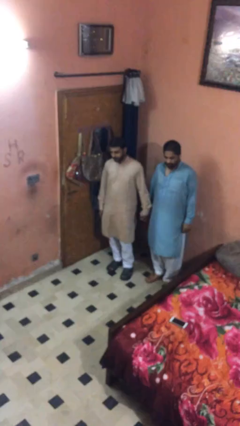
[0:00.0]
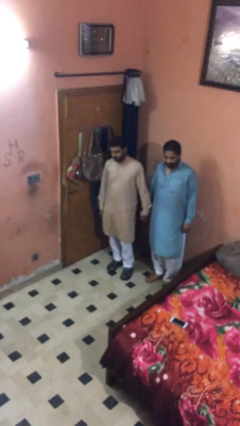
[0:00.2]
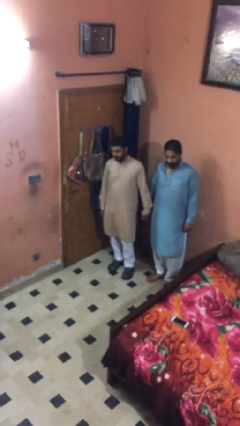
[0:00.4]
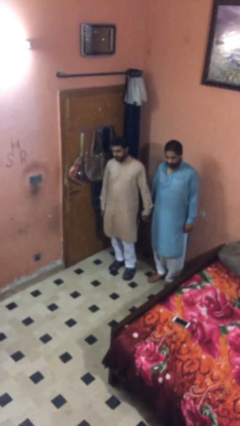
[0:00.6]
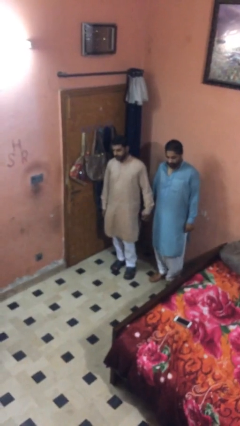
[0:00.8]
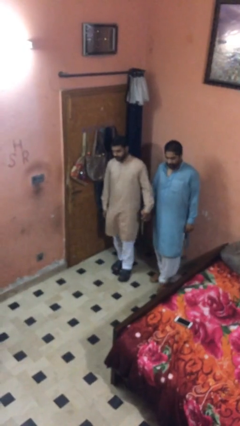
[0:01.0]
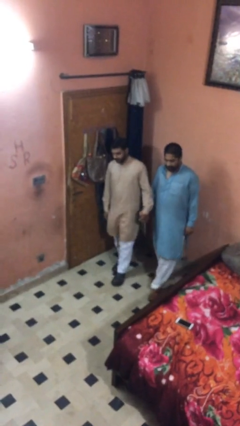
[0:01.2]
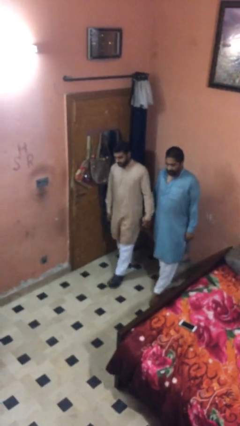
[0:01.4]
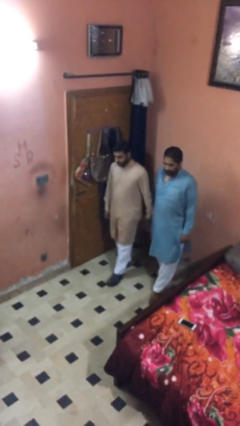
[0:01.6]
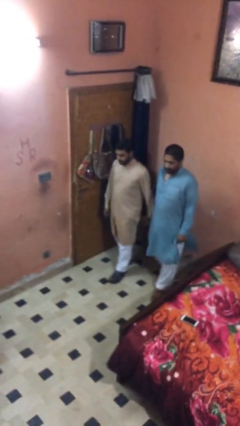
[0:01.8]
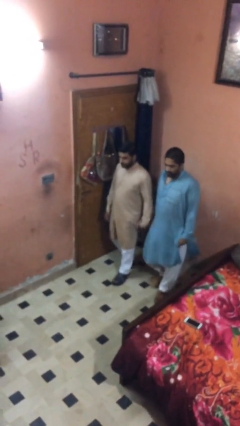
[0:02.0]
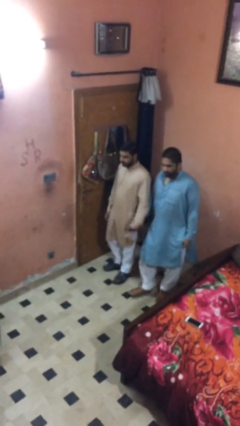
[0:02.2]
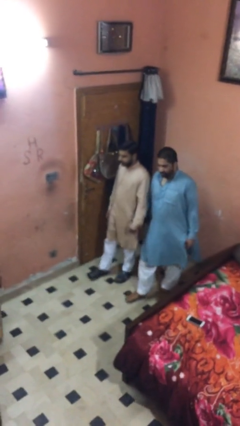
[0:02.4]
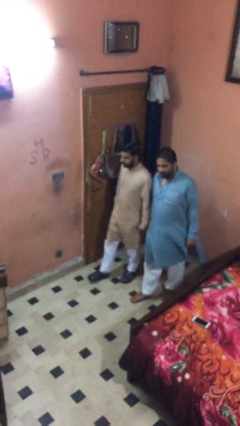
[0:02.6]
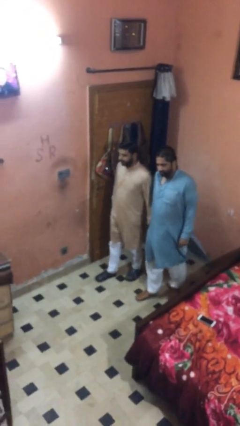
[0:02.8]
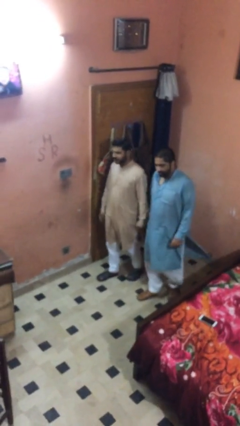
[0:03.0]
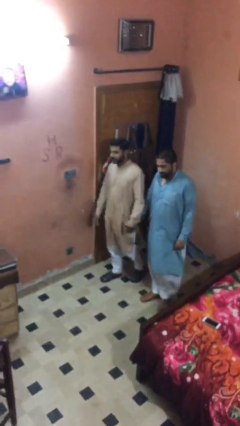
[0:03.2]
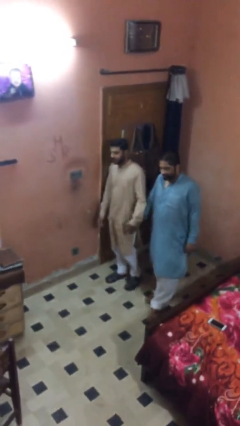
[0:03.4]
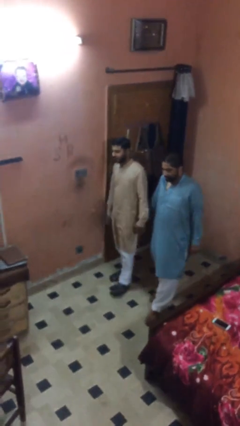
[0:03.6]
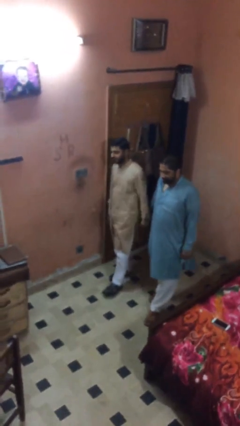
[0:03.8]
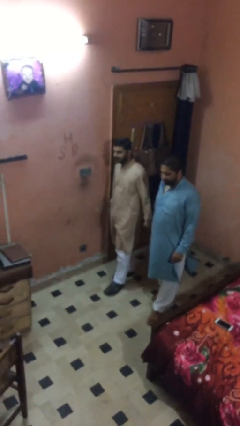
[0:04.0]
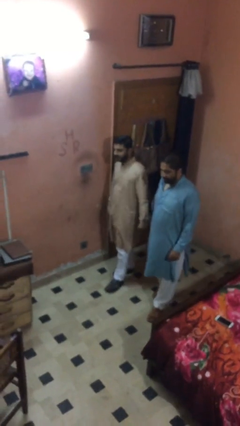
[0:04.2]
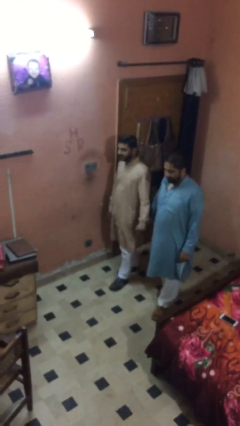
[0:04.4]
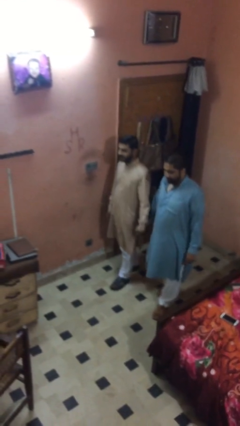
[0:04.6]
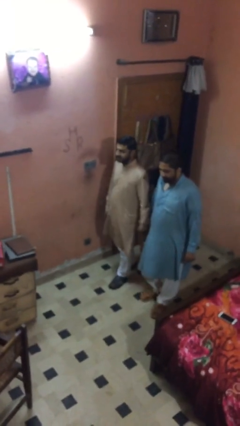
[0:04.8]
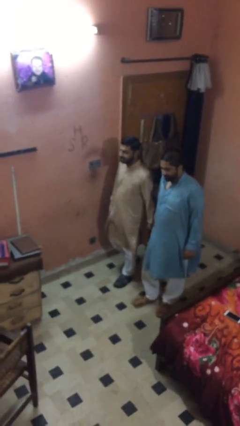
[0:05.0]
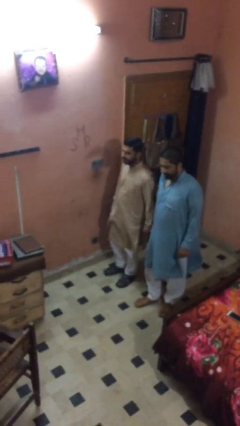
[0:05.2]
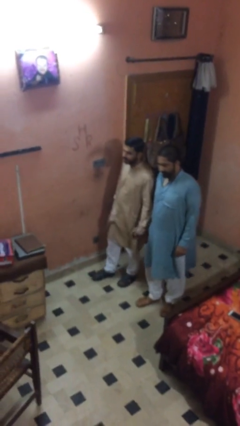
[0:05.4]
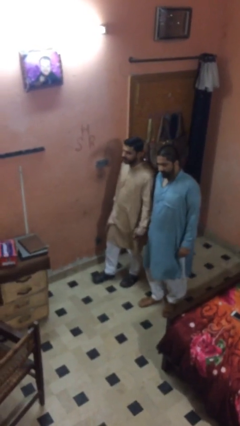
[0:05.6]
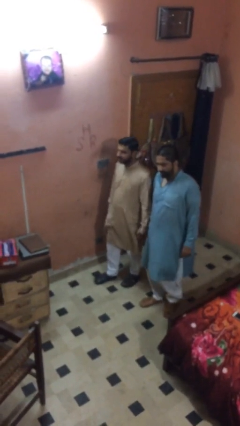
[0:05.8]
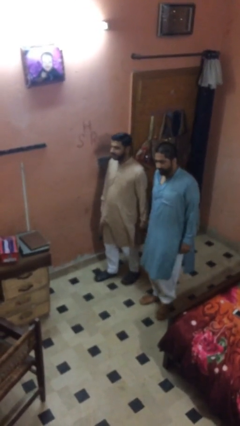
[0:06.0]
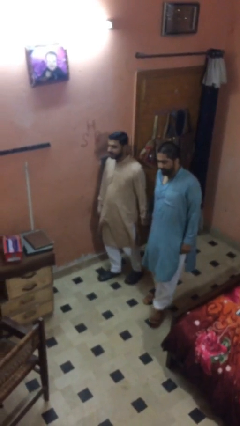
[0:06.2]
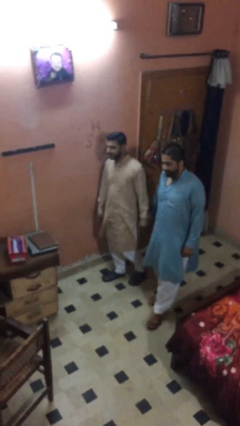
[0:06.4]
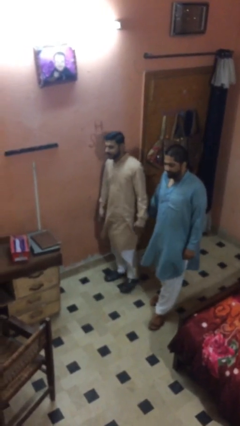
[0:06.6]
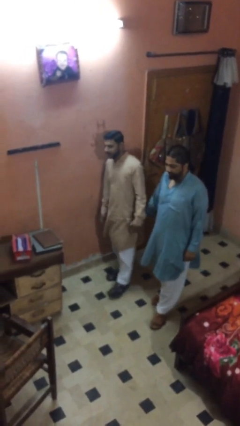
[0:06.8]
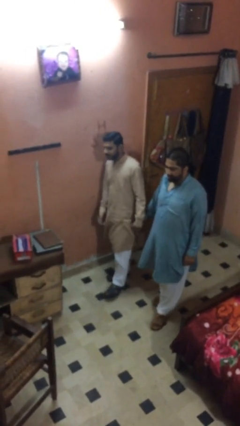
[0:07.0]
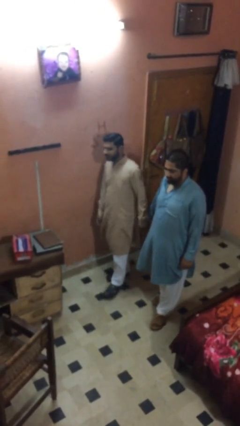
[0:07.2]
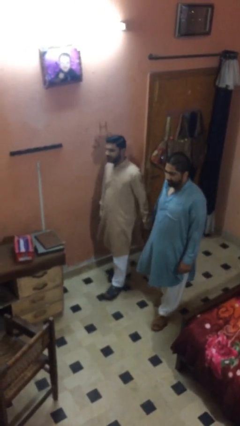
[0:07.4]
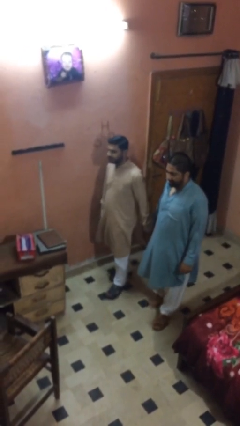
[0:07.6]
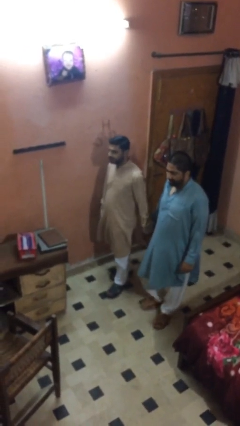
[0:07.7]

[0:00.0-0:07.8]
person holds hand

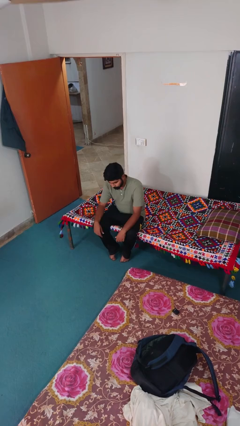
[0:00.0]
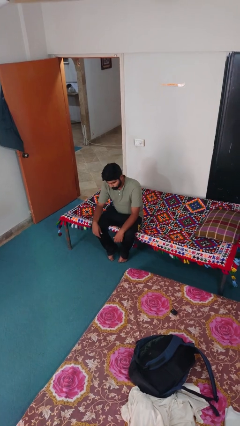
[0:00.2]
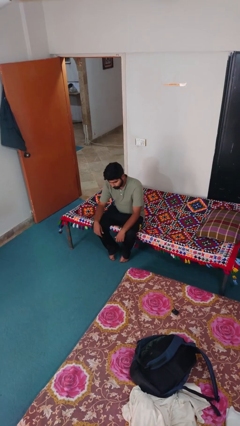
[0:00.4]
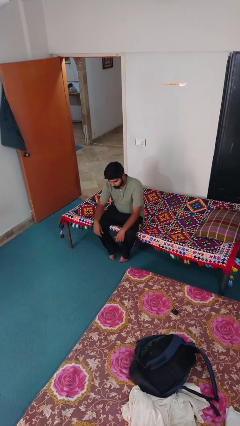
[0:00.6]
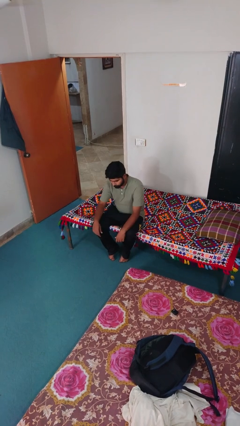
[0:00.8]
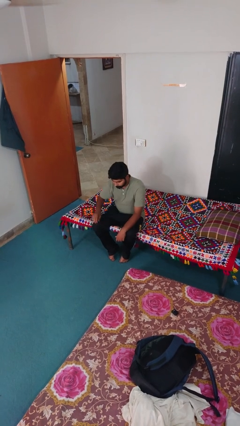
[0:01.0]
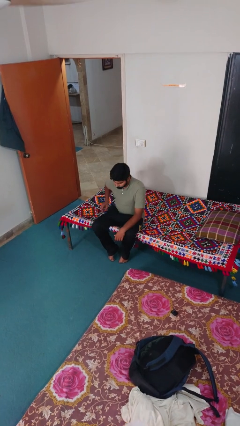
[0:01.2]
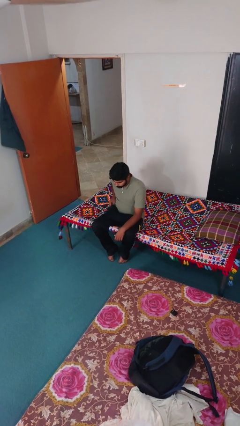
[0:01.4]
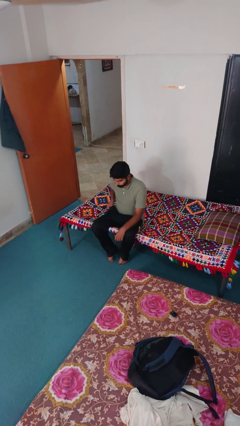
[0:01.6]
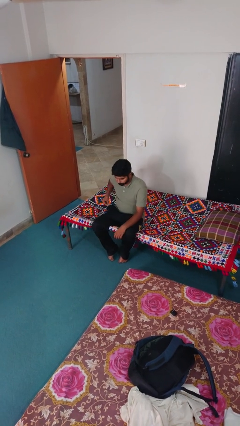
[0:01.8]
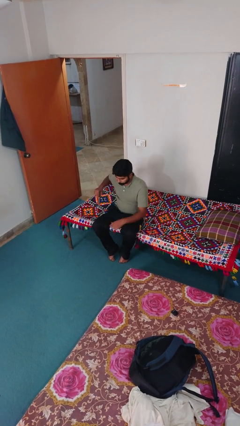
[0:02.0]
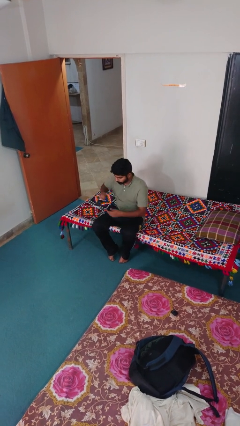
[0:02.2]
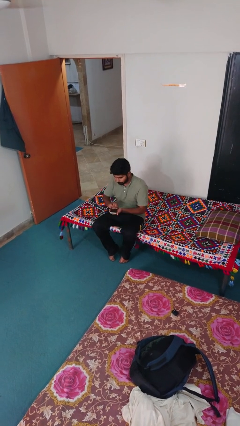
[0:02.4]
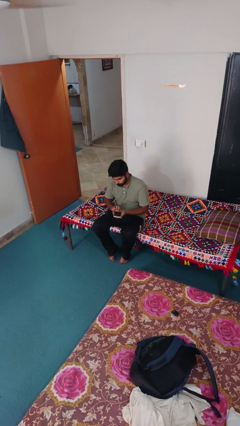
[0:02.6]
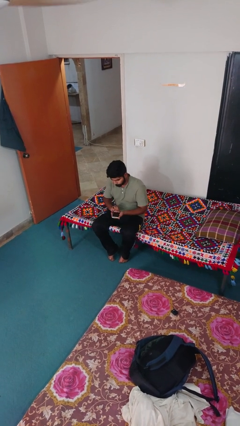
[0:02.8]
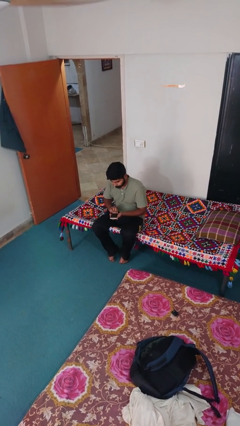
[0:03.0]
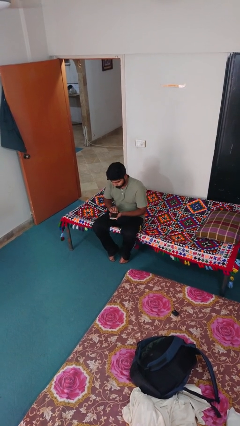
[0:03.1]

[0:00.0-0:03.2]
person takes phone from pocket

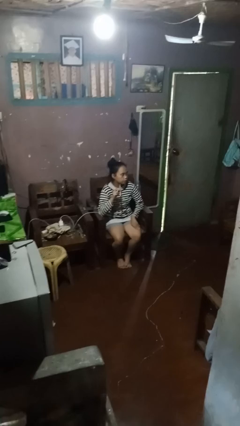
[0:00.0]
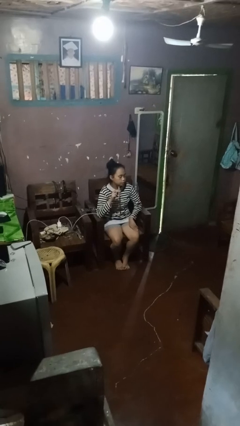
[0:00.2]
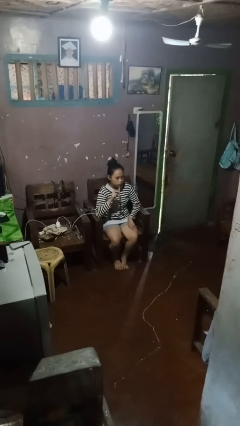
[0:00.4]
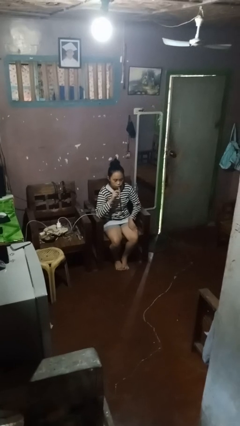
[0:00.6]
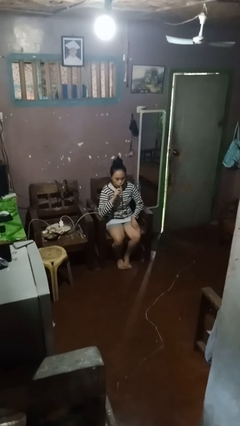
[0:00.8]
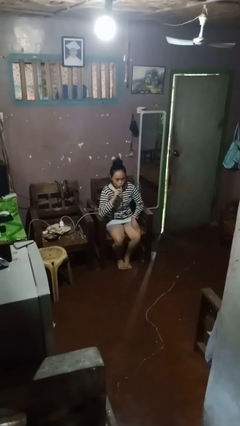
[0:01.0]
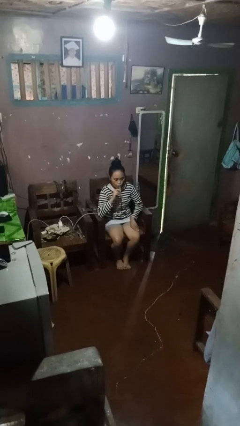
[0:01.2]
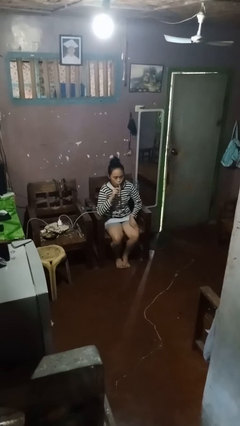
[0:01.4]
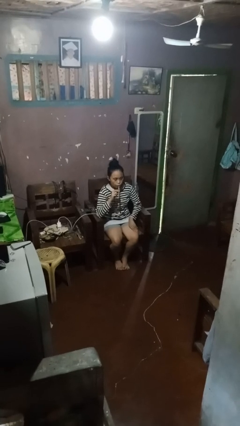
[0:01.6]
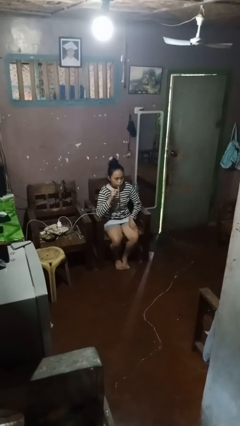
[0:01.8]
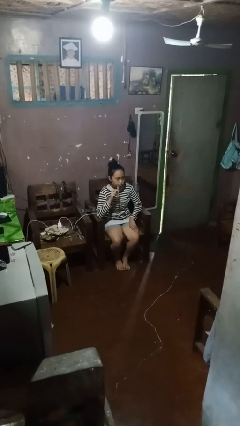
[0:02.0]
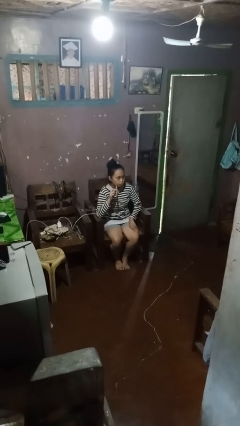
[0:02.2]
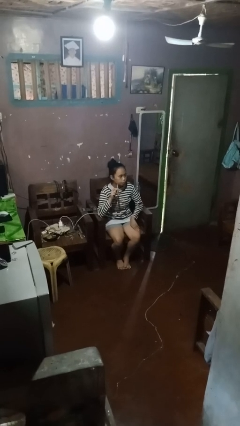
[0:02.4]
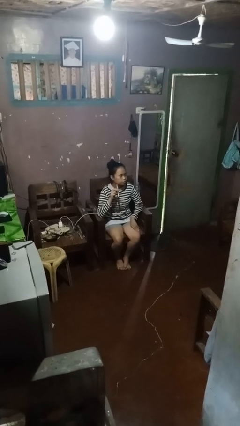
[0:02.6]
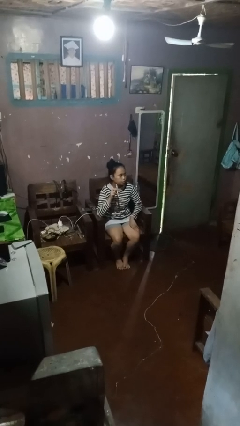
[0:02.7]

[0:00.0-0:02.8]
person vapes

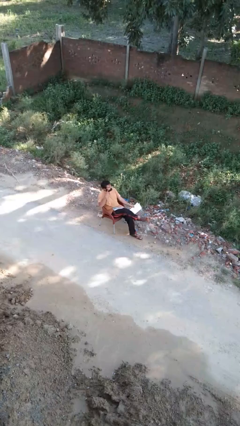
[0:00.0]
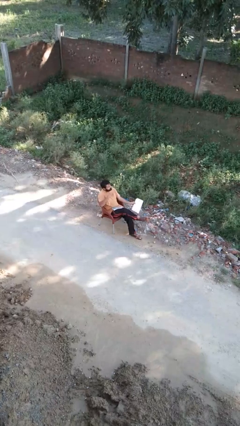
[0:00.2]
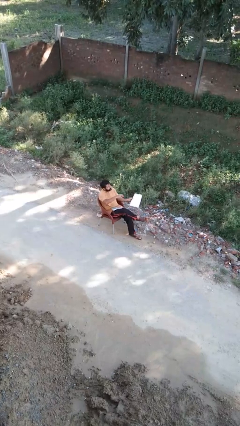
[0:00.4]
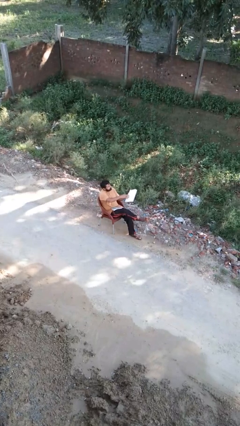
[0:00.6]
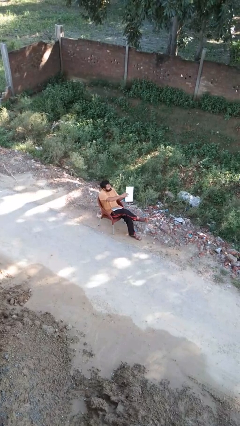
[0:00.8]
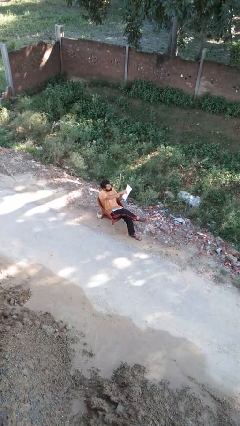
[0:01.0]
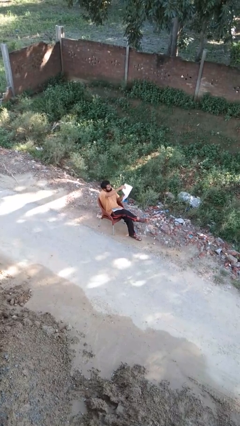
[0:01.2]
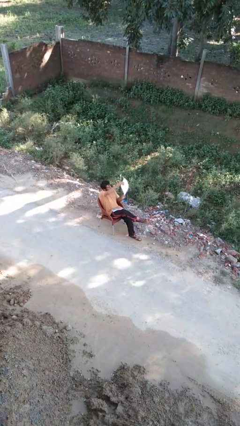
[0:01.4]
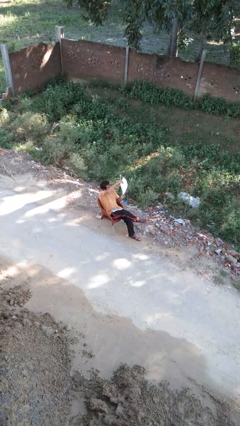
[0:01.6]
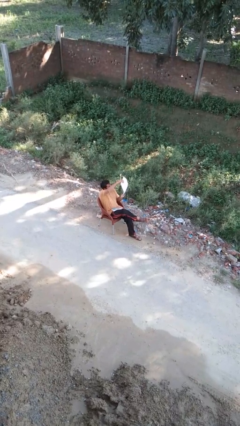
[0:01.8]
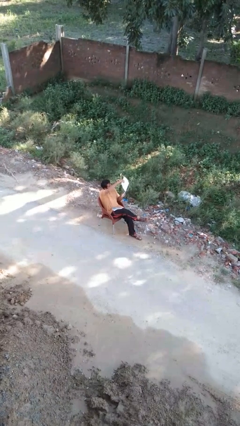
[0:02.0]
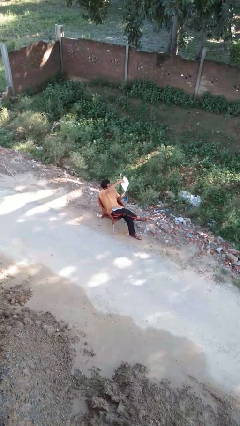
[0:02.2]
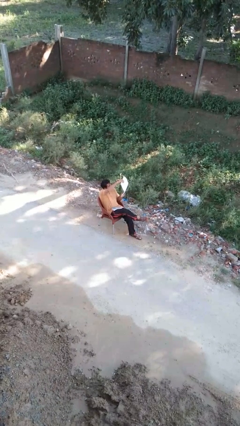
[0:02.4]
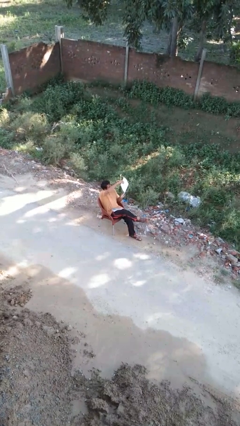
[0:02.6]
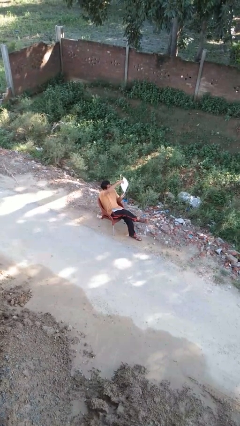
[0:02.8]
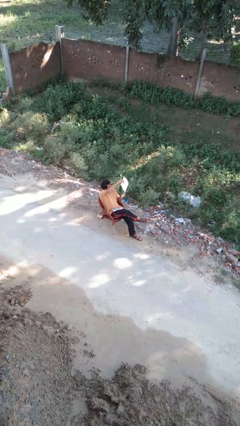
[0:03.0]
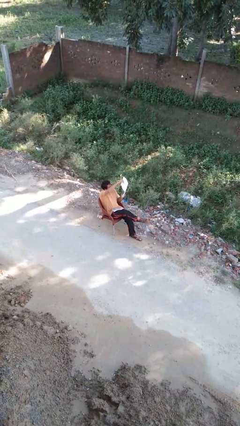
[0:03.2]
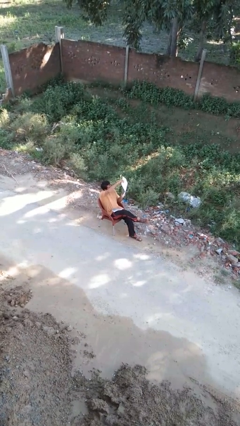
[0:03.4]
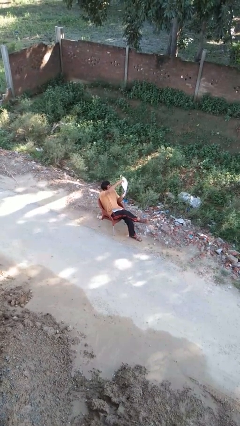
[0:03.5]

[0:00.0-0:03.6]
person reads newspaper

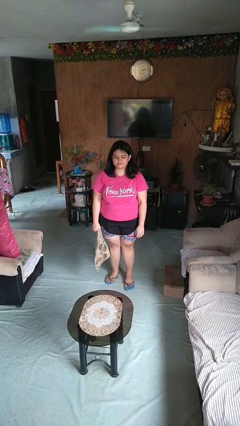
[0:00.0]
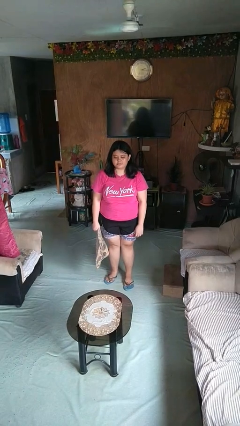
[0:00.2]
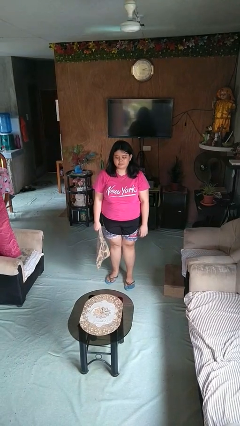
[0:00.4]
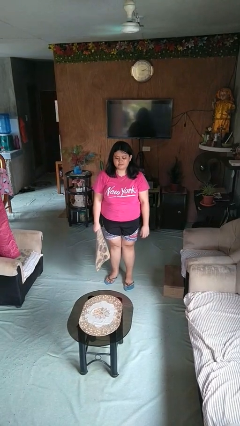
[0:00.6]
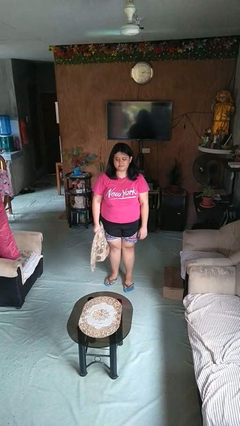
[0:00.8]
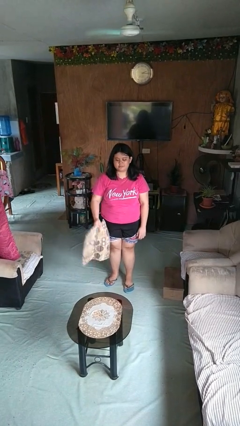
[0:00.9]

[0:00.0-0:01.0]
person throws object on table
